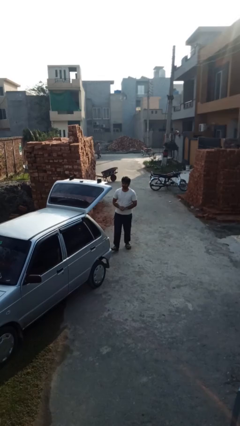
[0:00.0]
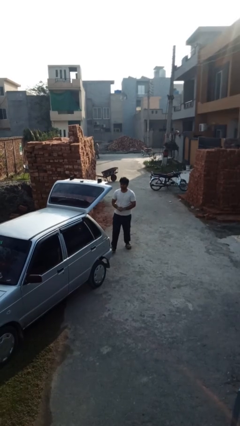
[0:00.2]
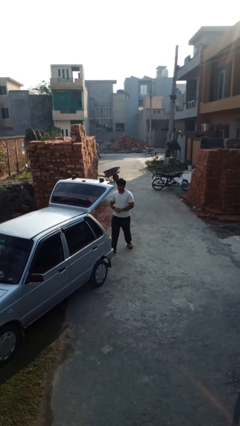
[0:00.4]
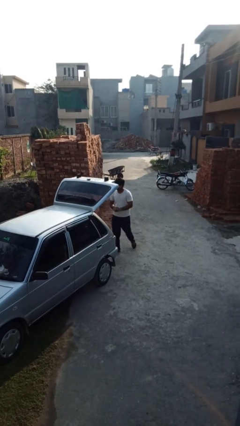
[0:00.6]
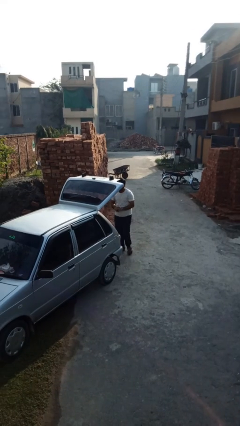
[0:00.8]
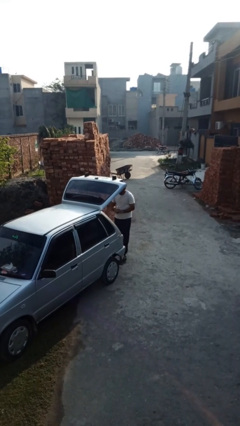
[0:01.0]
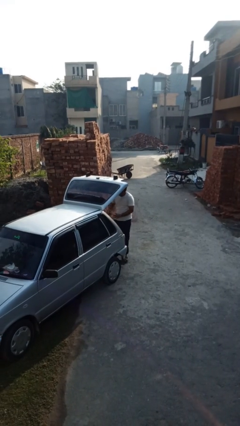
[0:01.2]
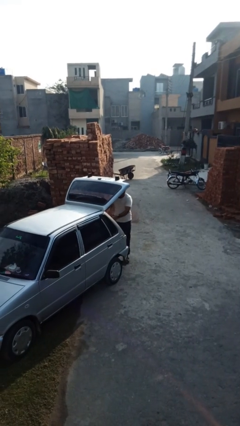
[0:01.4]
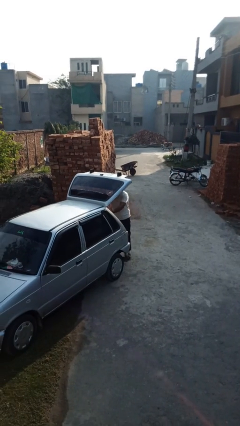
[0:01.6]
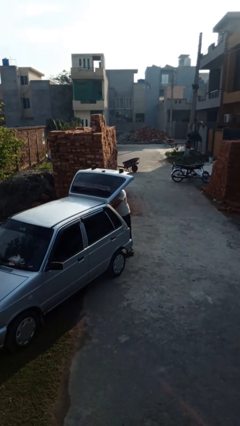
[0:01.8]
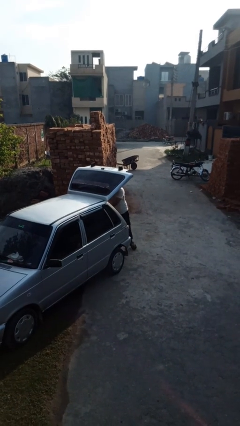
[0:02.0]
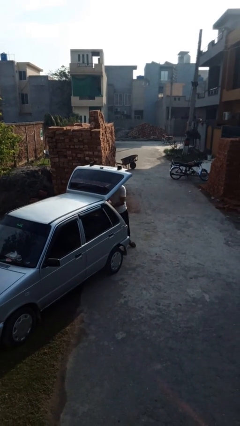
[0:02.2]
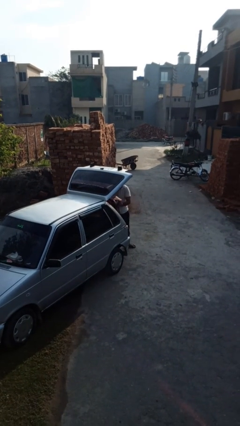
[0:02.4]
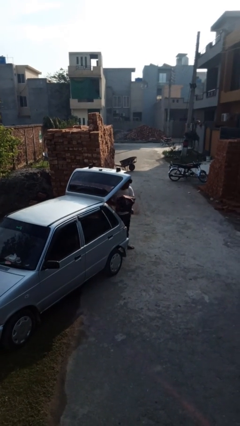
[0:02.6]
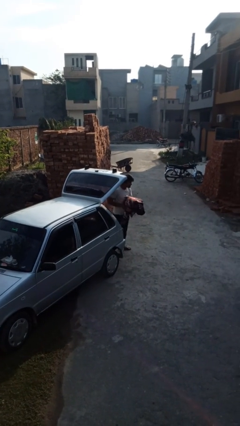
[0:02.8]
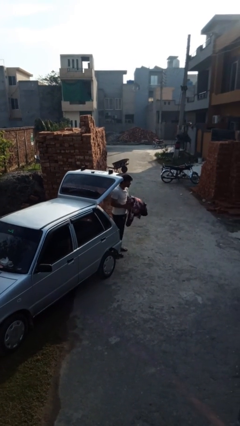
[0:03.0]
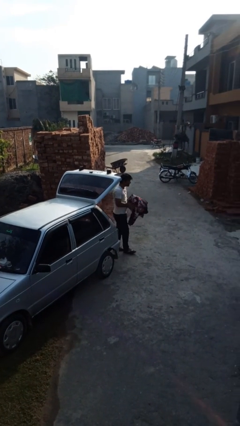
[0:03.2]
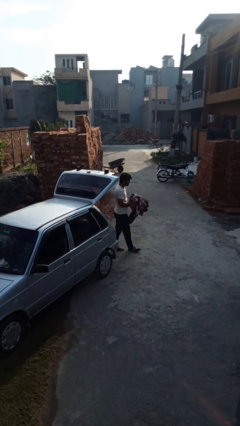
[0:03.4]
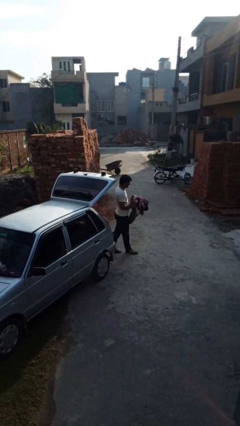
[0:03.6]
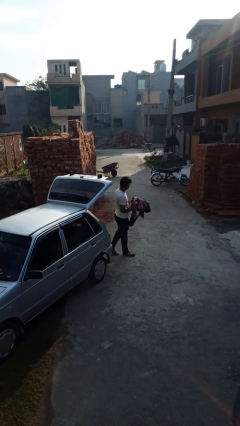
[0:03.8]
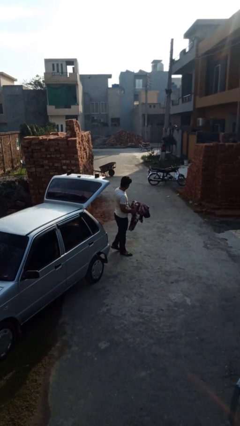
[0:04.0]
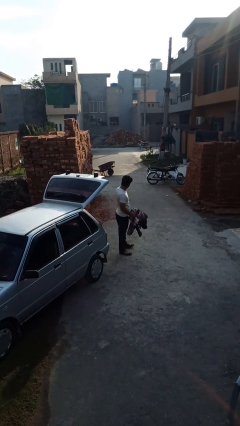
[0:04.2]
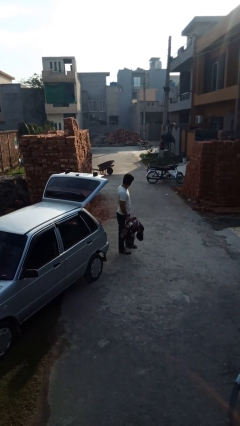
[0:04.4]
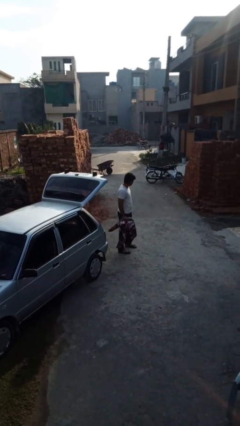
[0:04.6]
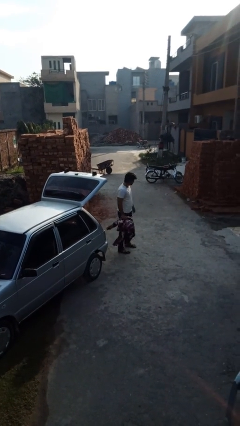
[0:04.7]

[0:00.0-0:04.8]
person unloads car

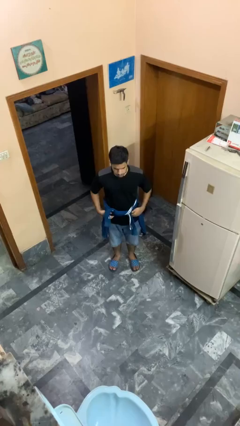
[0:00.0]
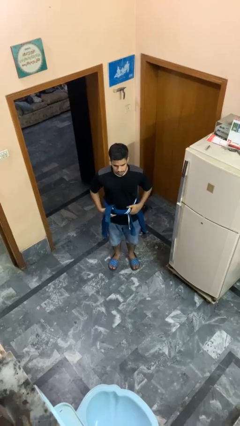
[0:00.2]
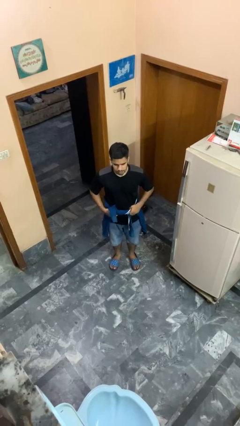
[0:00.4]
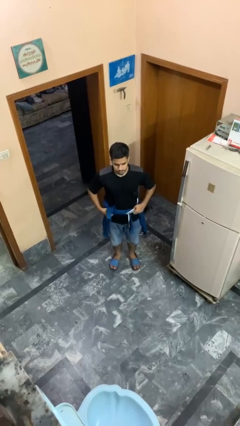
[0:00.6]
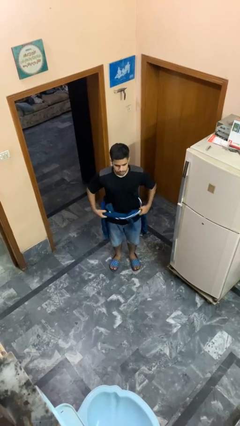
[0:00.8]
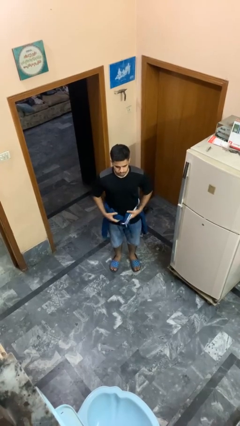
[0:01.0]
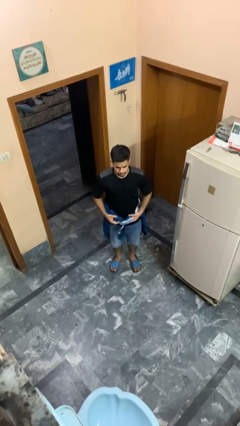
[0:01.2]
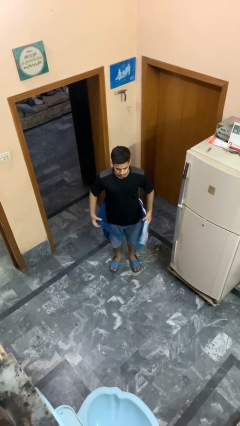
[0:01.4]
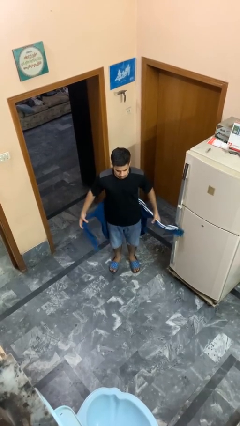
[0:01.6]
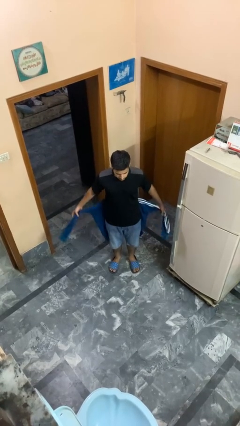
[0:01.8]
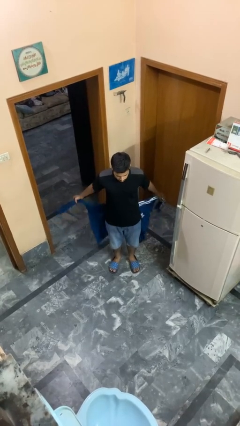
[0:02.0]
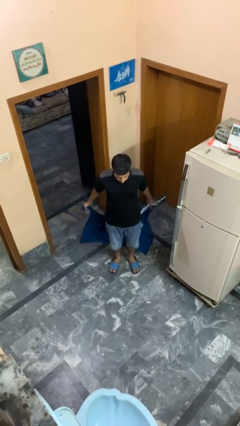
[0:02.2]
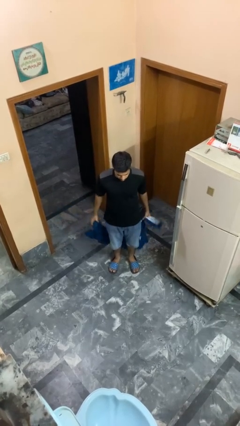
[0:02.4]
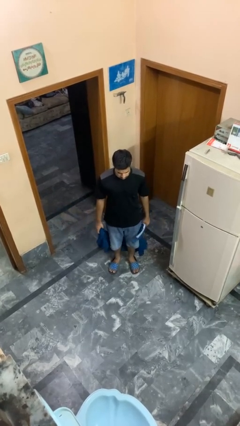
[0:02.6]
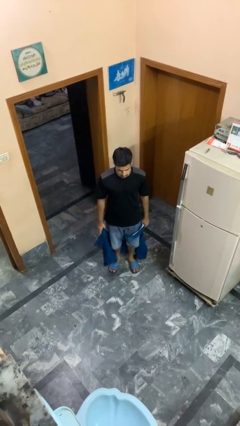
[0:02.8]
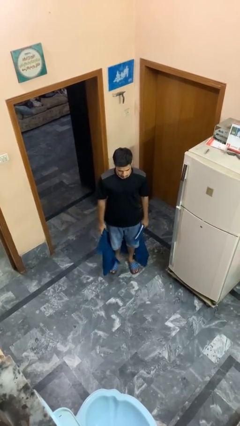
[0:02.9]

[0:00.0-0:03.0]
person unties jacket around waist

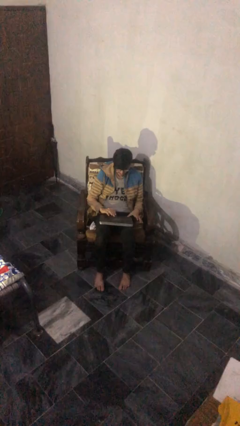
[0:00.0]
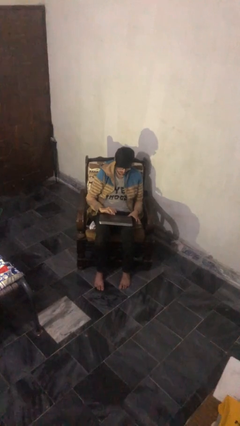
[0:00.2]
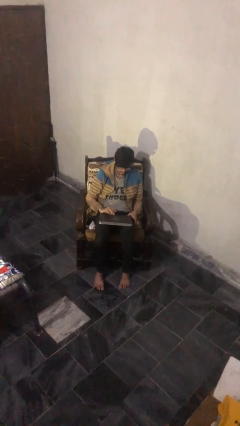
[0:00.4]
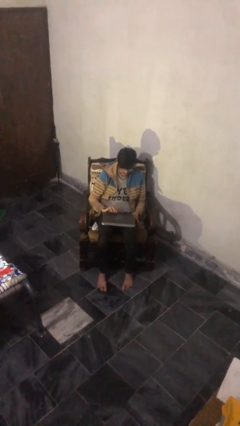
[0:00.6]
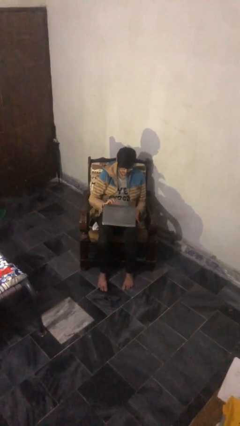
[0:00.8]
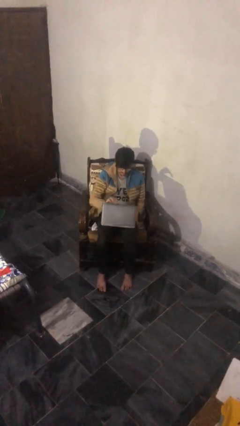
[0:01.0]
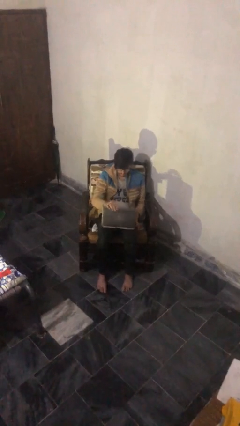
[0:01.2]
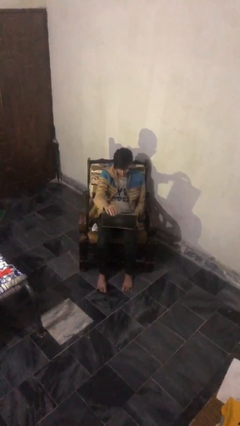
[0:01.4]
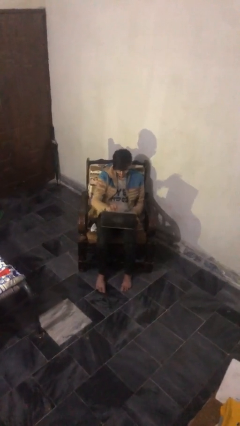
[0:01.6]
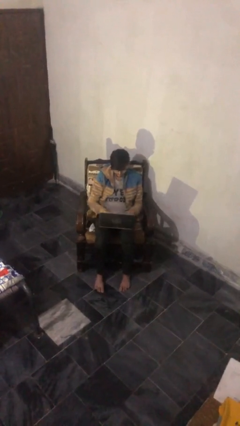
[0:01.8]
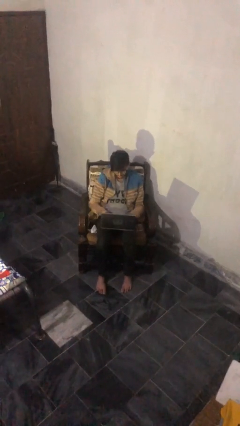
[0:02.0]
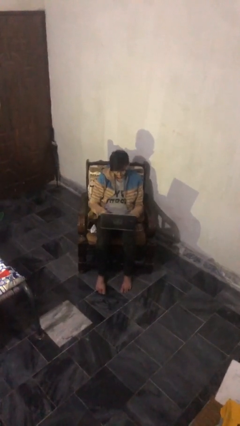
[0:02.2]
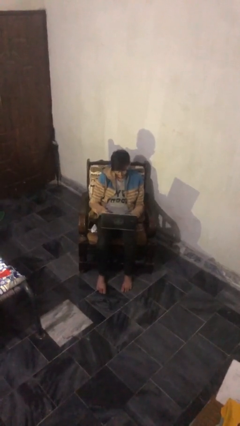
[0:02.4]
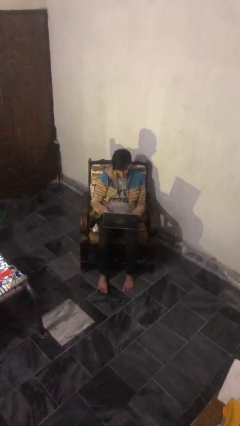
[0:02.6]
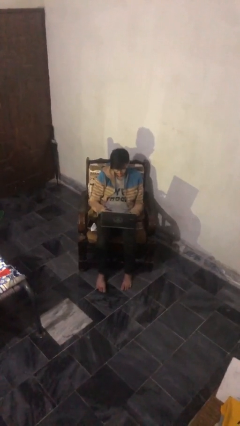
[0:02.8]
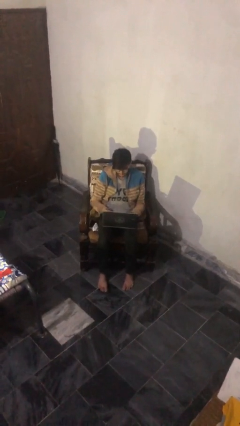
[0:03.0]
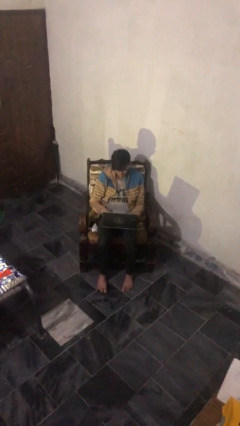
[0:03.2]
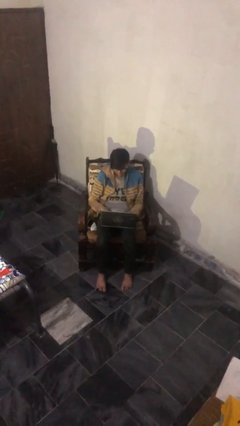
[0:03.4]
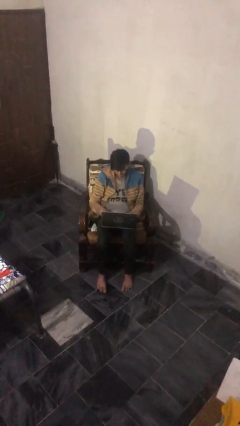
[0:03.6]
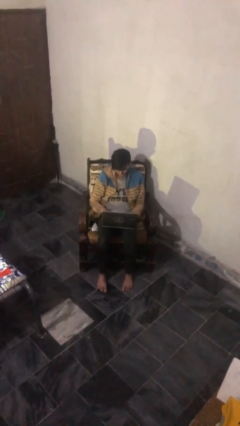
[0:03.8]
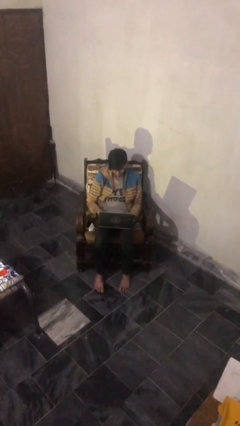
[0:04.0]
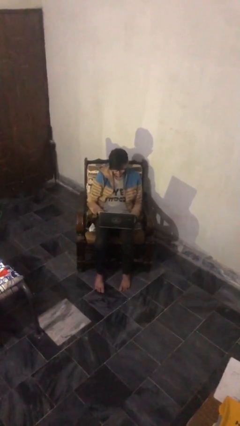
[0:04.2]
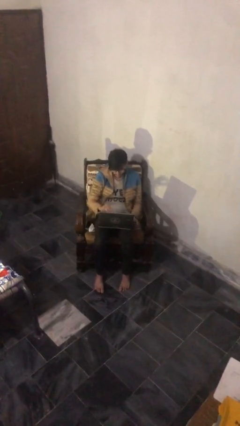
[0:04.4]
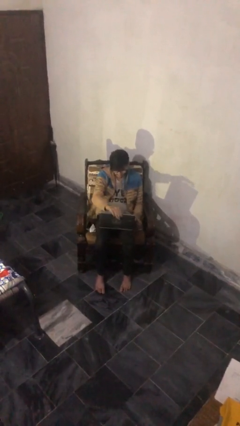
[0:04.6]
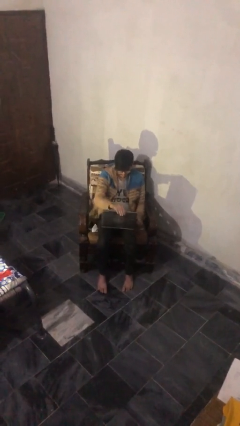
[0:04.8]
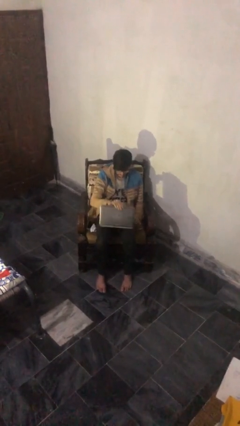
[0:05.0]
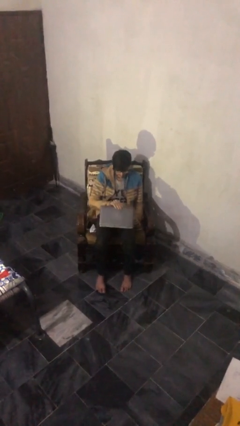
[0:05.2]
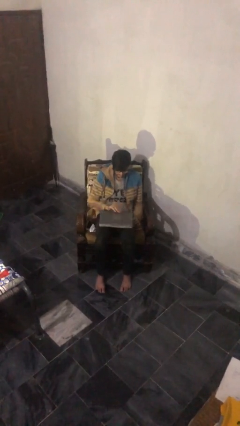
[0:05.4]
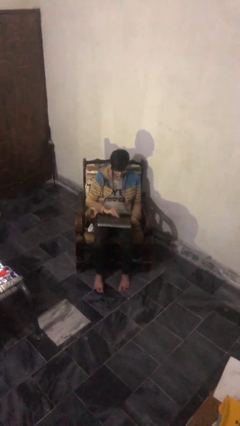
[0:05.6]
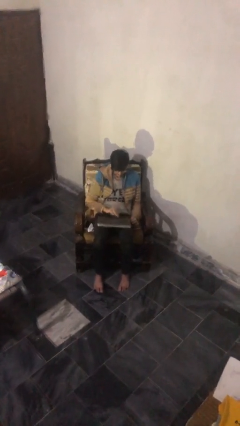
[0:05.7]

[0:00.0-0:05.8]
person interacts with laptop

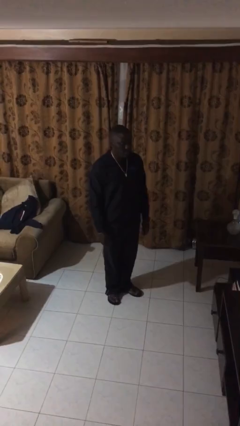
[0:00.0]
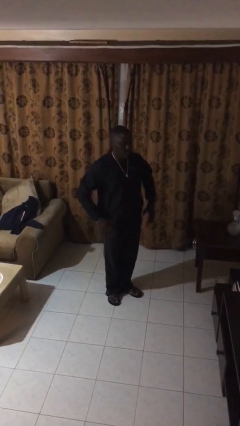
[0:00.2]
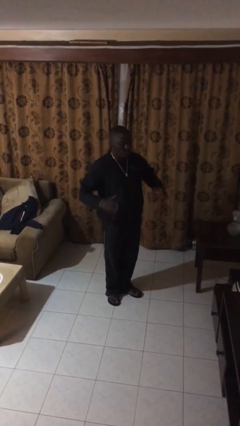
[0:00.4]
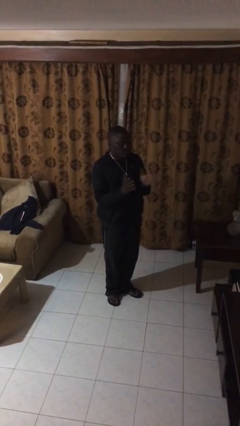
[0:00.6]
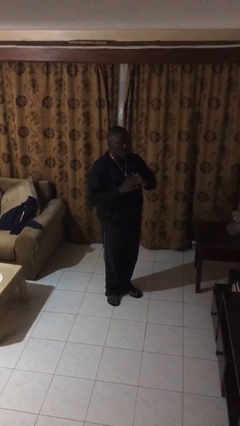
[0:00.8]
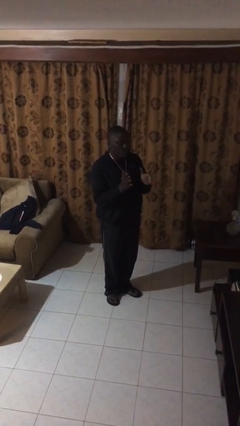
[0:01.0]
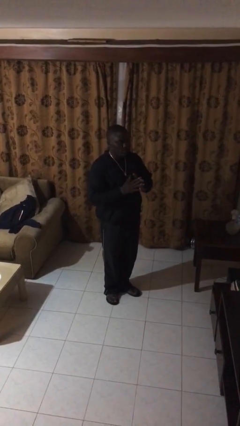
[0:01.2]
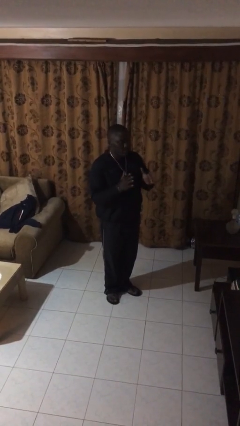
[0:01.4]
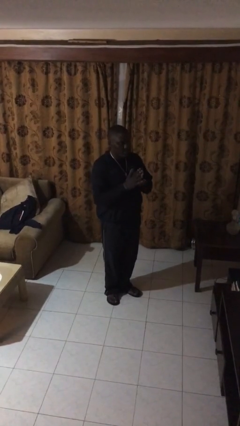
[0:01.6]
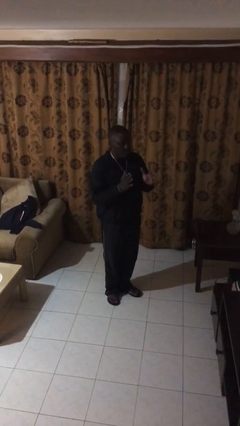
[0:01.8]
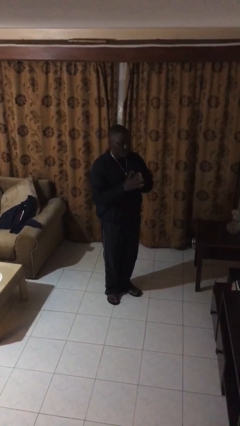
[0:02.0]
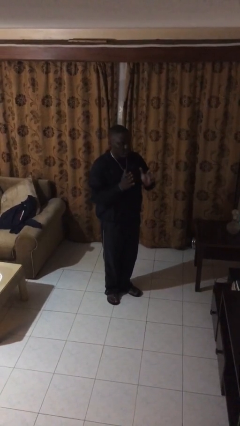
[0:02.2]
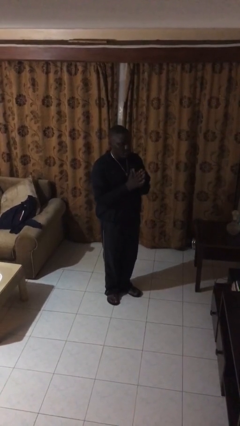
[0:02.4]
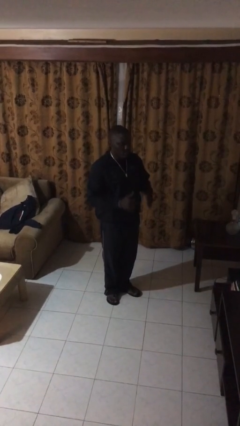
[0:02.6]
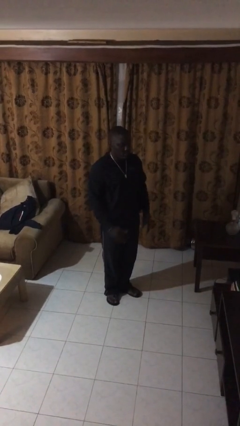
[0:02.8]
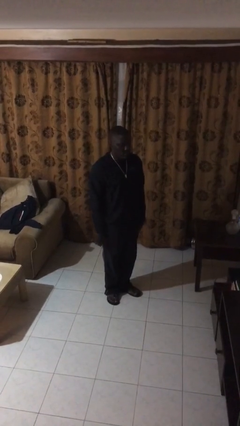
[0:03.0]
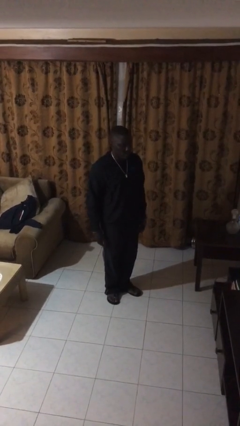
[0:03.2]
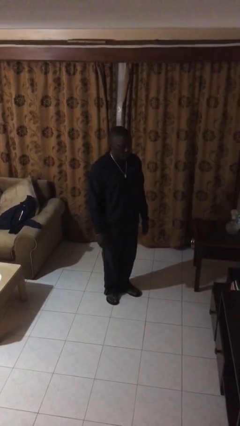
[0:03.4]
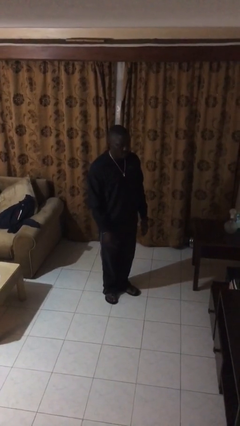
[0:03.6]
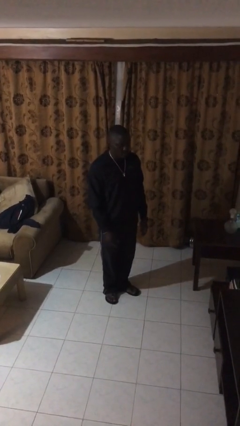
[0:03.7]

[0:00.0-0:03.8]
person claps hands

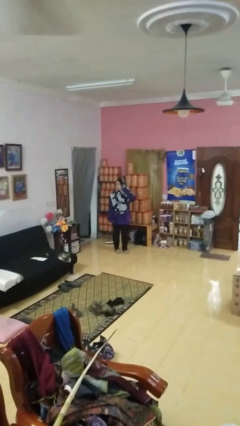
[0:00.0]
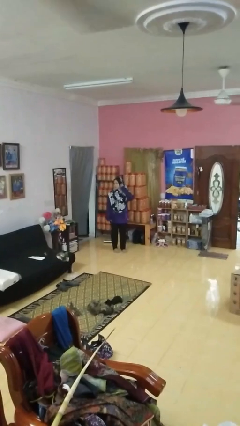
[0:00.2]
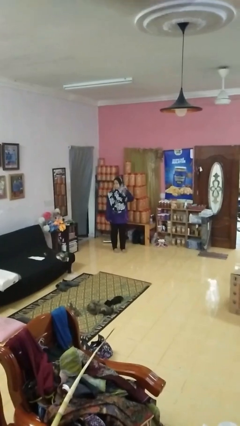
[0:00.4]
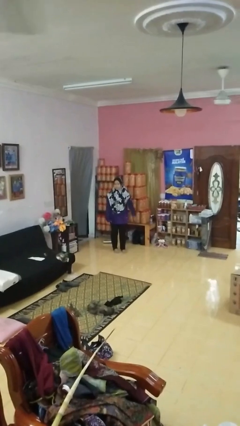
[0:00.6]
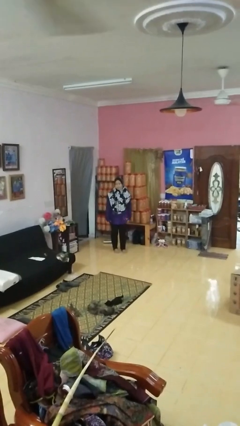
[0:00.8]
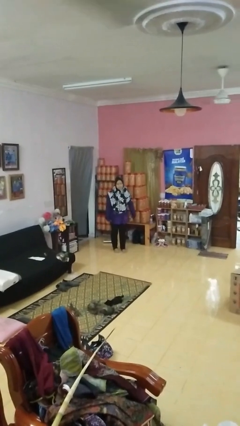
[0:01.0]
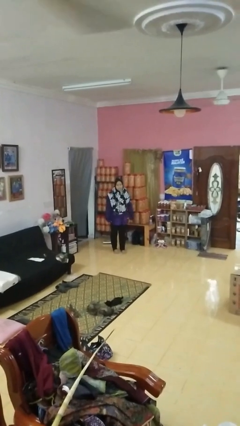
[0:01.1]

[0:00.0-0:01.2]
person gestures listen closely
